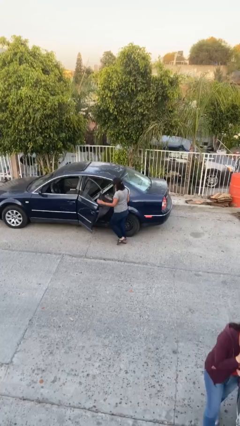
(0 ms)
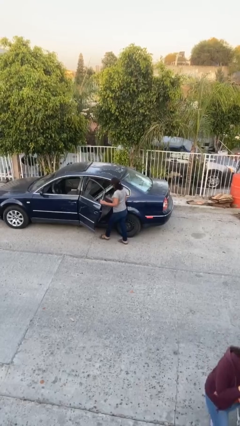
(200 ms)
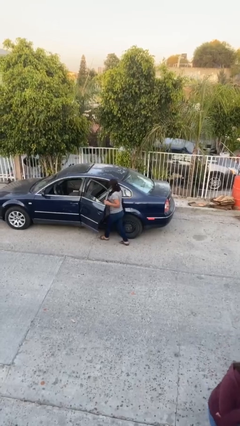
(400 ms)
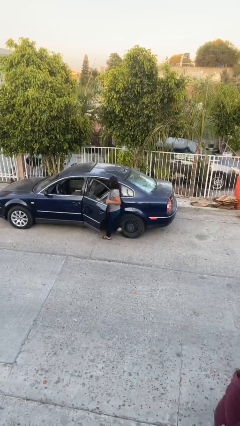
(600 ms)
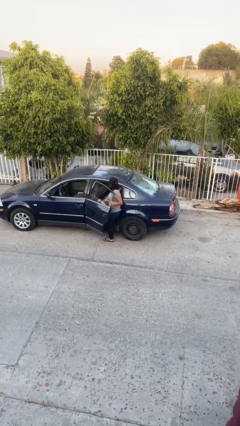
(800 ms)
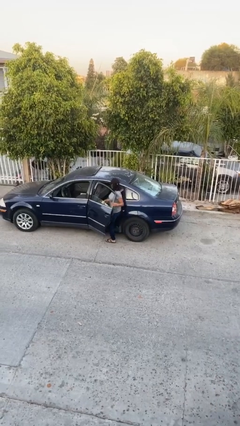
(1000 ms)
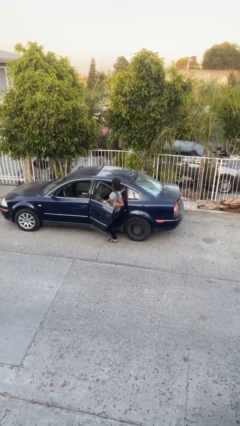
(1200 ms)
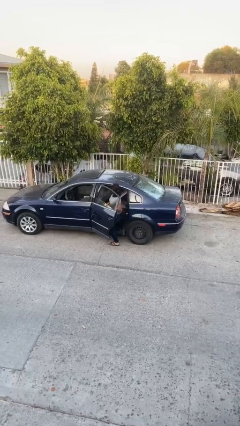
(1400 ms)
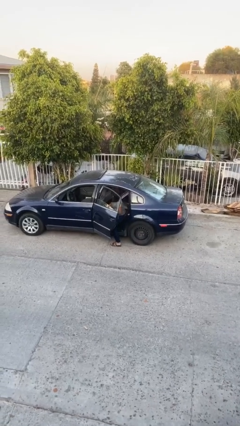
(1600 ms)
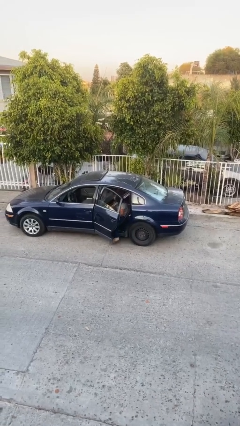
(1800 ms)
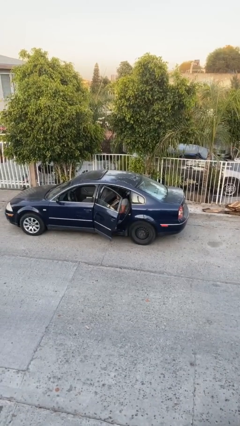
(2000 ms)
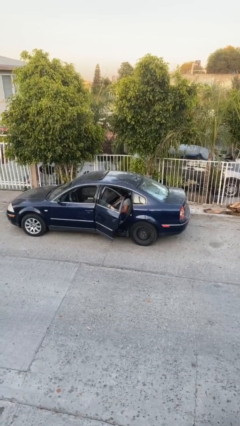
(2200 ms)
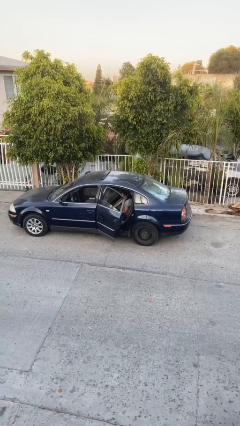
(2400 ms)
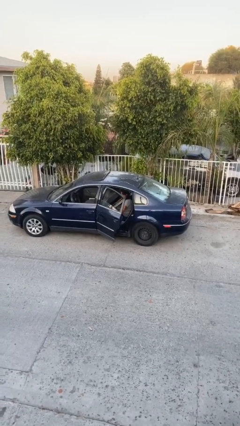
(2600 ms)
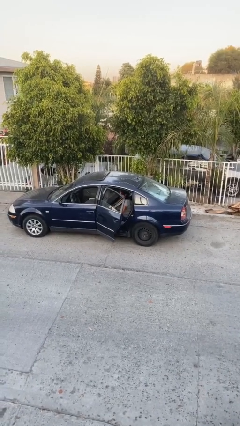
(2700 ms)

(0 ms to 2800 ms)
person enters car

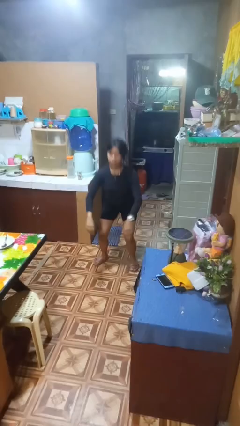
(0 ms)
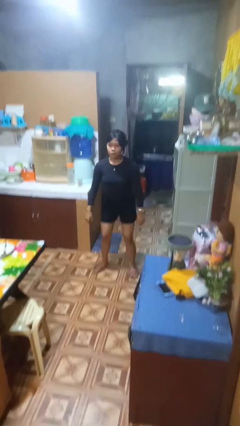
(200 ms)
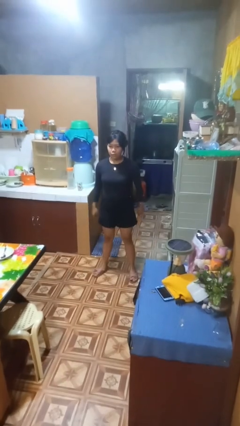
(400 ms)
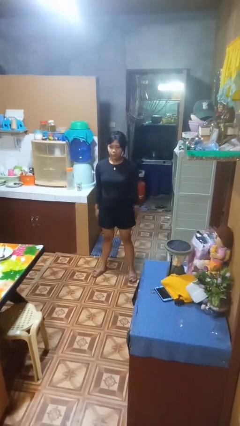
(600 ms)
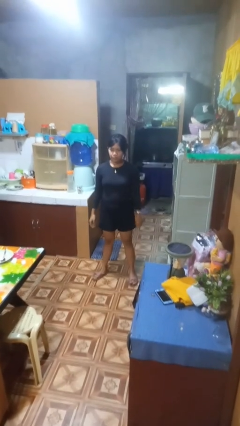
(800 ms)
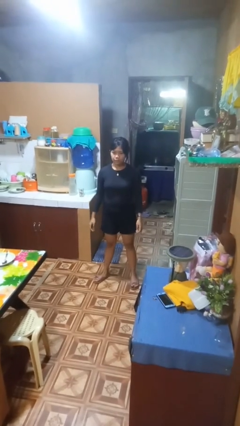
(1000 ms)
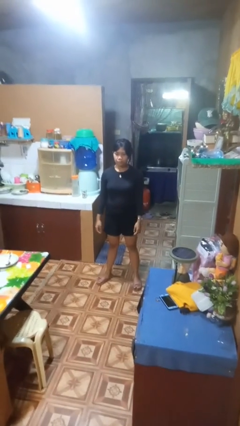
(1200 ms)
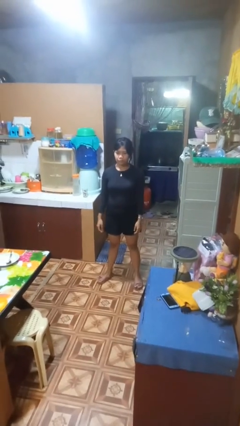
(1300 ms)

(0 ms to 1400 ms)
person stands up

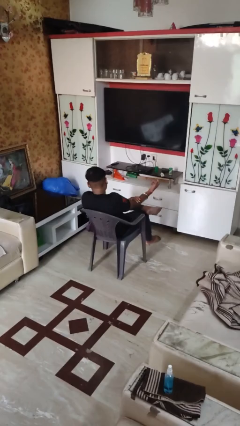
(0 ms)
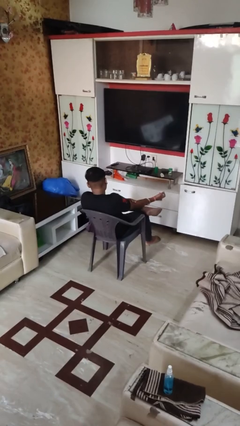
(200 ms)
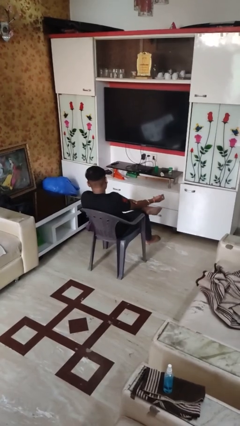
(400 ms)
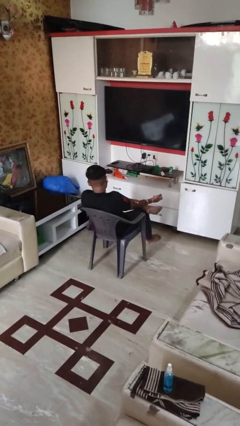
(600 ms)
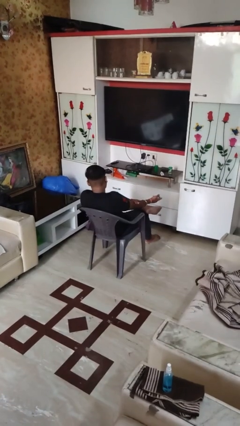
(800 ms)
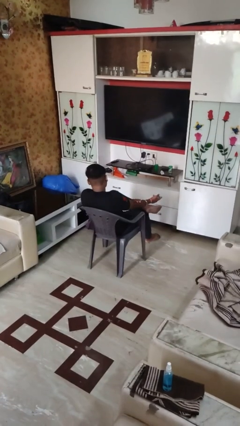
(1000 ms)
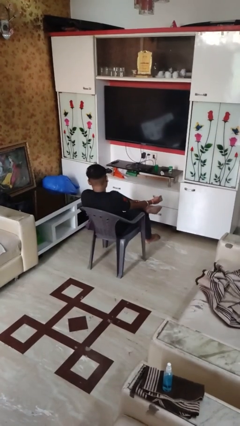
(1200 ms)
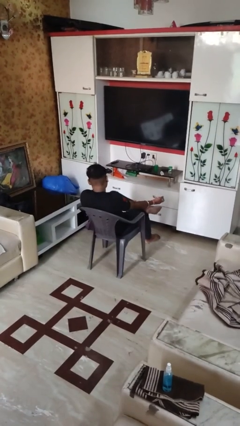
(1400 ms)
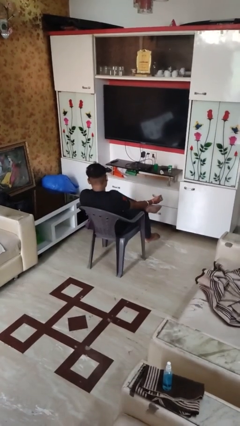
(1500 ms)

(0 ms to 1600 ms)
person swats bug

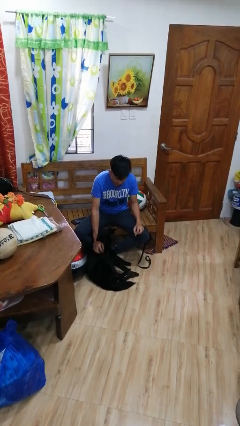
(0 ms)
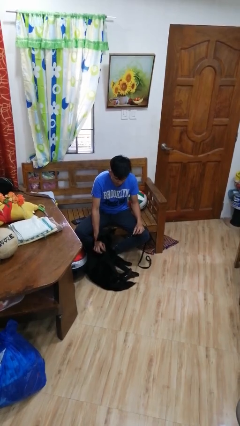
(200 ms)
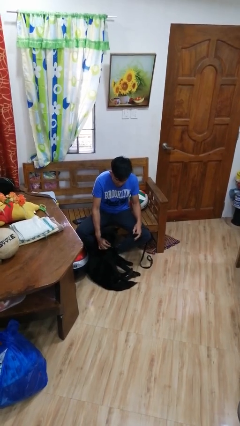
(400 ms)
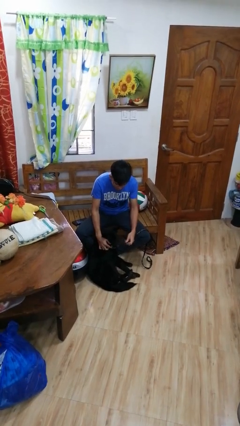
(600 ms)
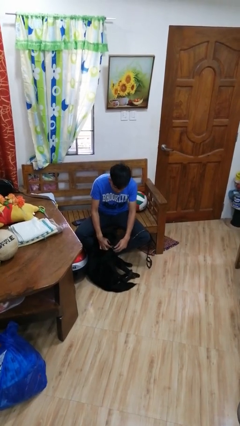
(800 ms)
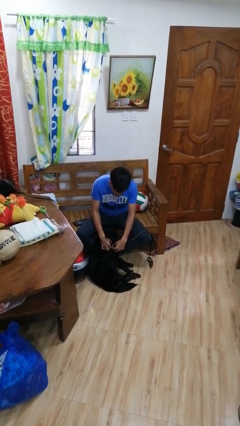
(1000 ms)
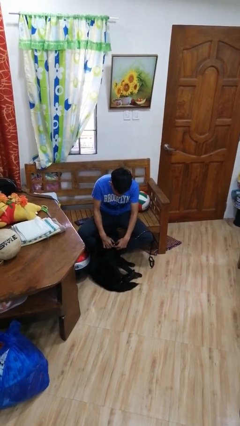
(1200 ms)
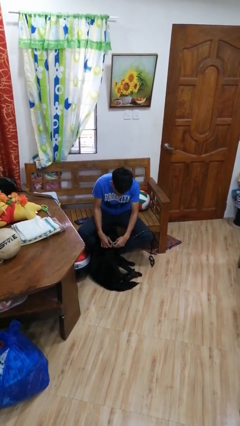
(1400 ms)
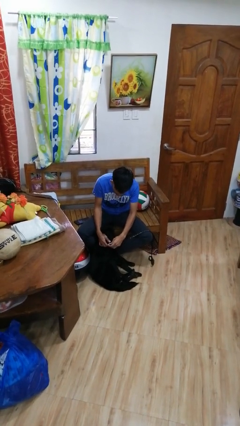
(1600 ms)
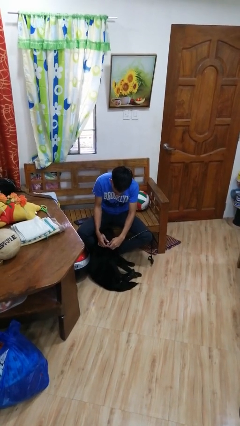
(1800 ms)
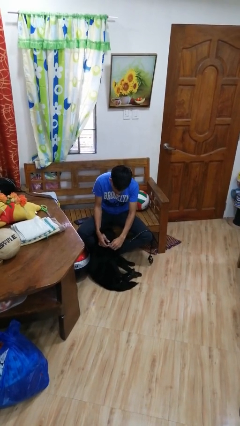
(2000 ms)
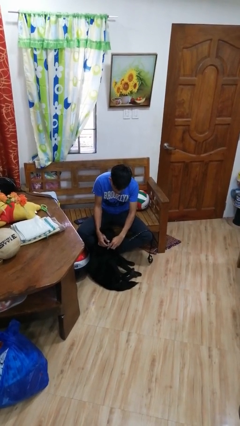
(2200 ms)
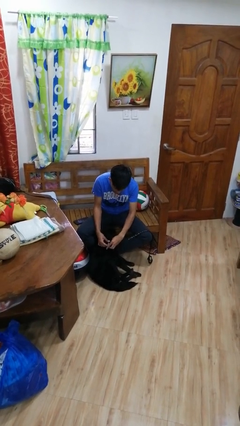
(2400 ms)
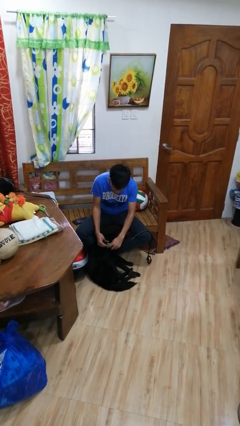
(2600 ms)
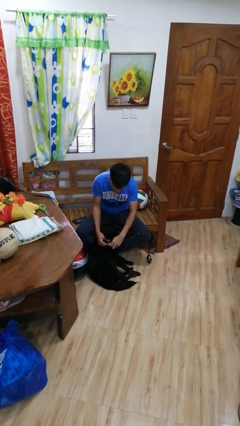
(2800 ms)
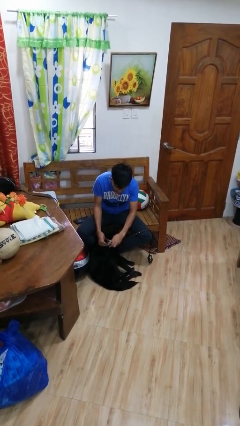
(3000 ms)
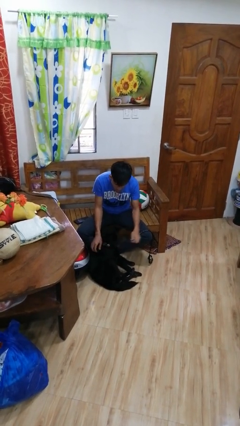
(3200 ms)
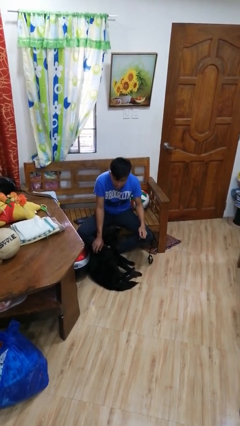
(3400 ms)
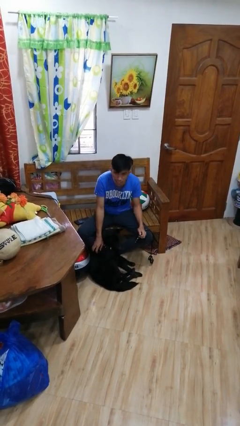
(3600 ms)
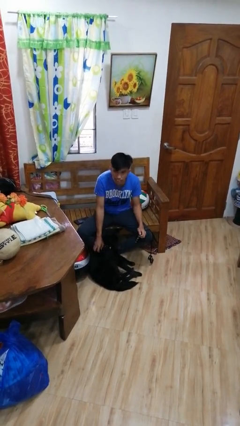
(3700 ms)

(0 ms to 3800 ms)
person unattaches leash from dog

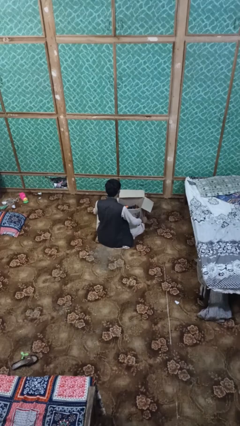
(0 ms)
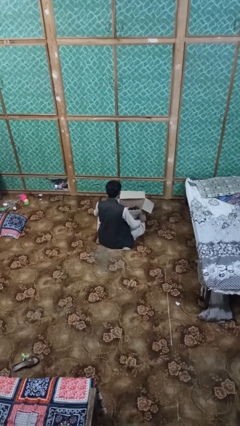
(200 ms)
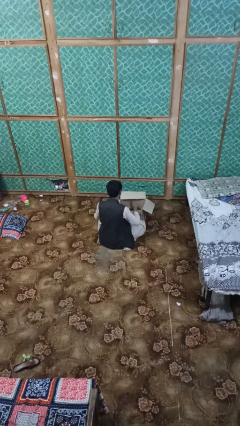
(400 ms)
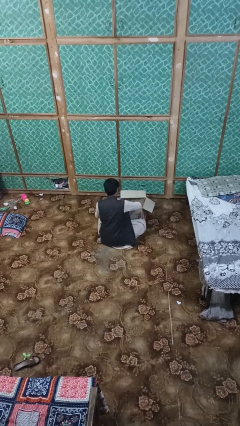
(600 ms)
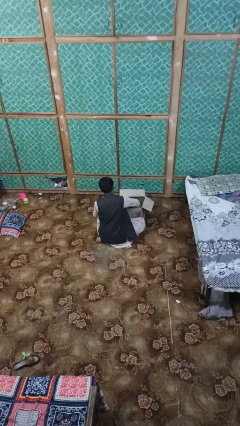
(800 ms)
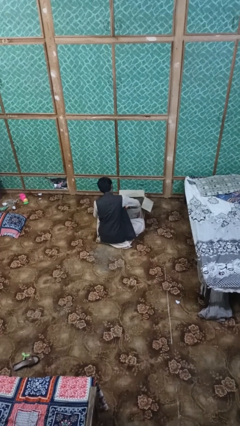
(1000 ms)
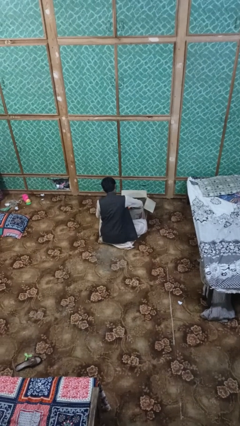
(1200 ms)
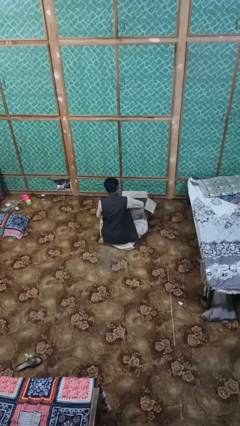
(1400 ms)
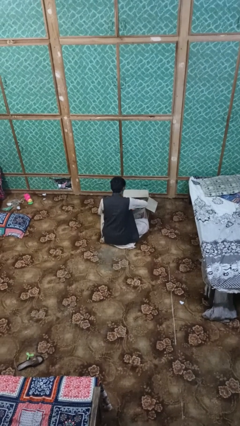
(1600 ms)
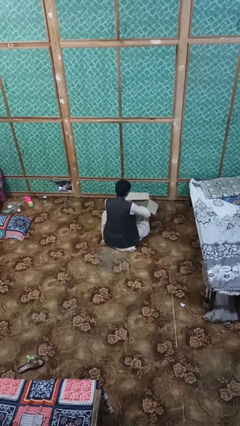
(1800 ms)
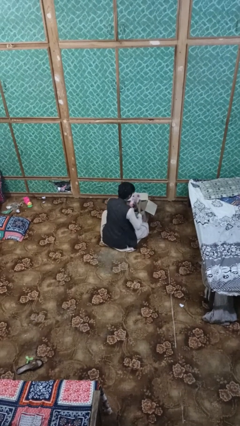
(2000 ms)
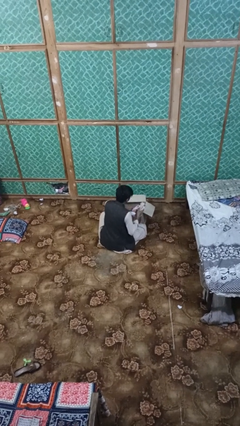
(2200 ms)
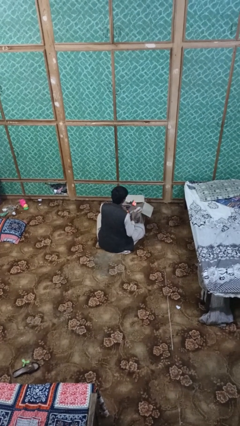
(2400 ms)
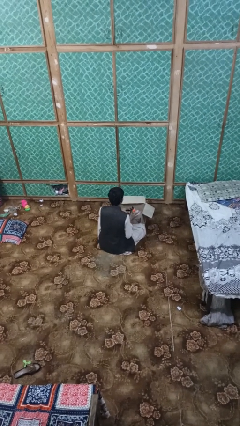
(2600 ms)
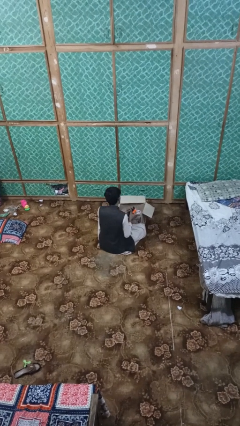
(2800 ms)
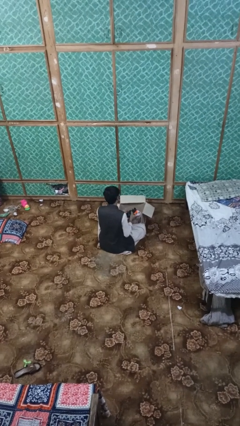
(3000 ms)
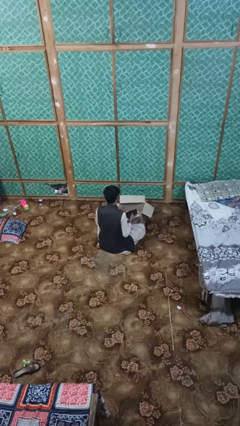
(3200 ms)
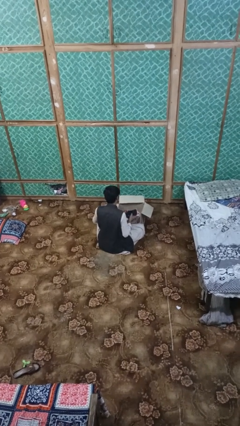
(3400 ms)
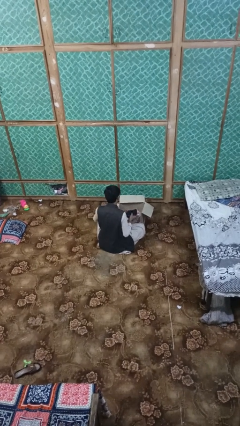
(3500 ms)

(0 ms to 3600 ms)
person takes object from box

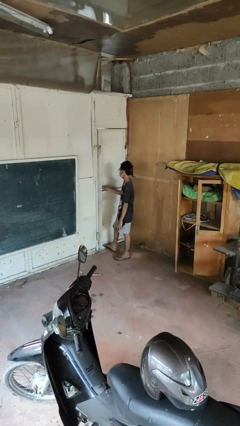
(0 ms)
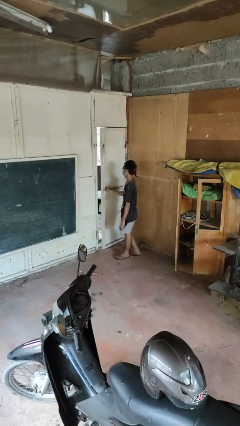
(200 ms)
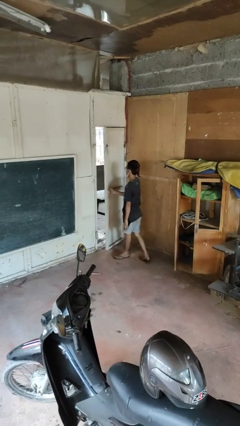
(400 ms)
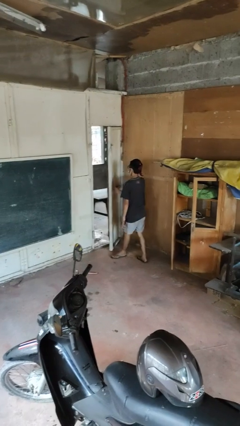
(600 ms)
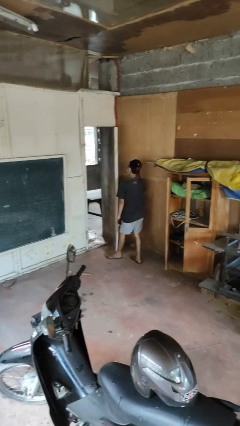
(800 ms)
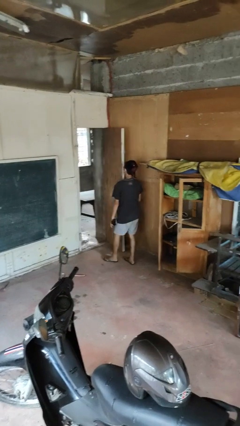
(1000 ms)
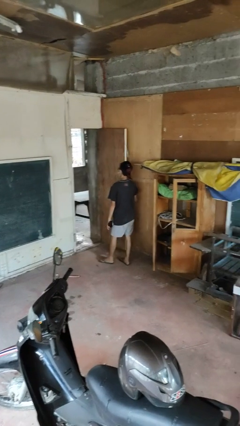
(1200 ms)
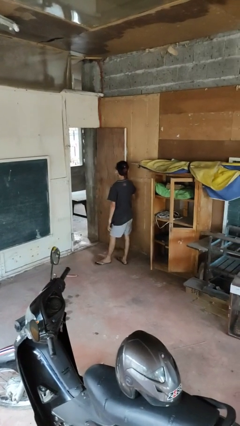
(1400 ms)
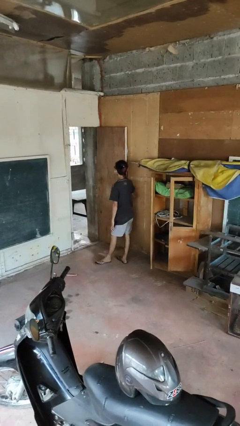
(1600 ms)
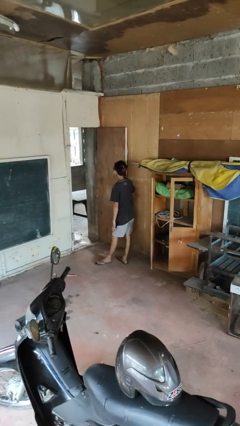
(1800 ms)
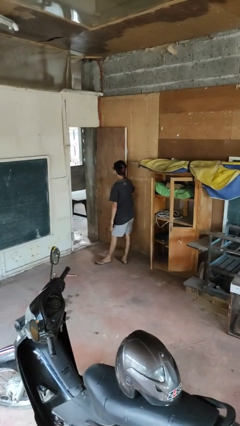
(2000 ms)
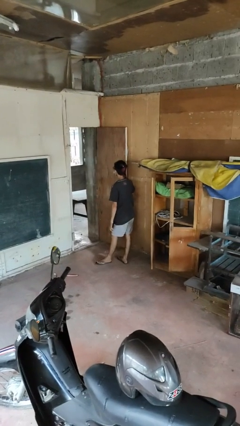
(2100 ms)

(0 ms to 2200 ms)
person opens facility door

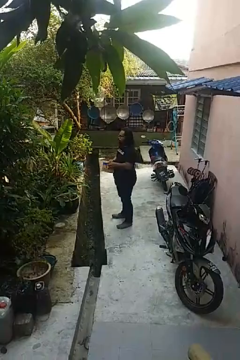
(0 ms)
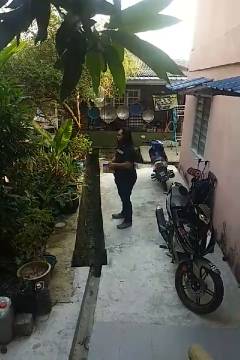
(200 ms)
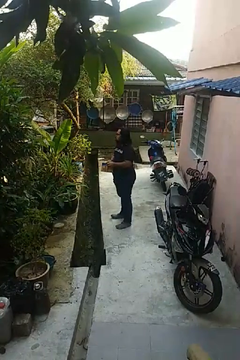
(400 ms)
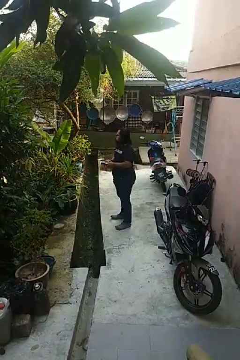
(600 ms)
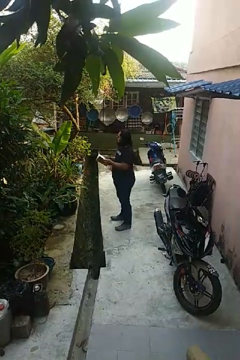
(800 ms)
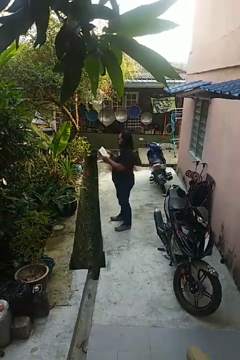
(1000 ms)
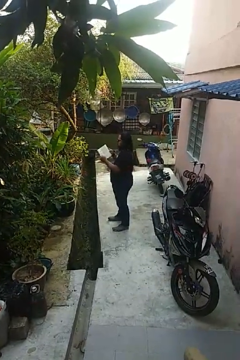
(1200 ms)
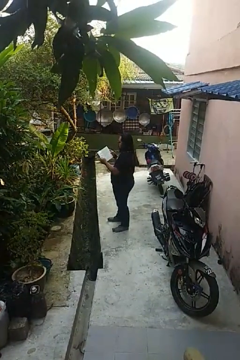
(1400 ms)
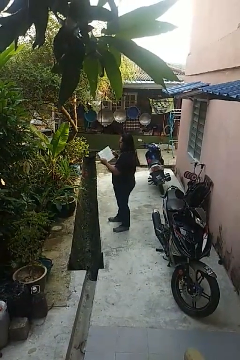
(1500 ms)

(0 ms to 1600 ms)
person reads book

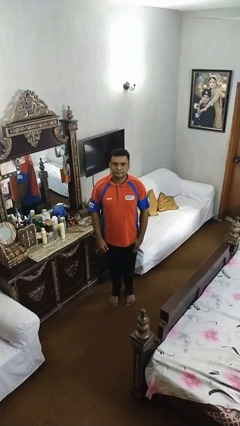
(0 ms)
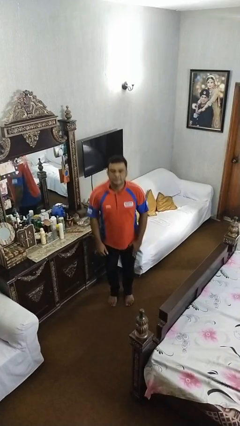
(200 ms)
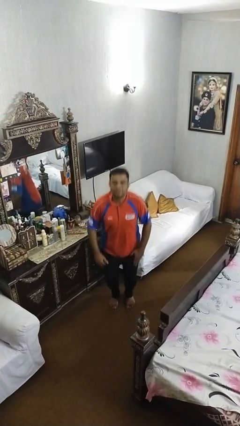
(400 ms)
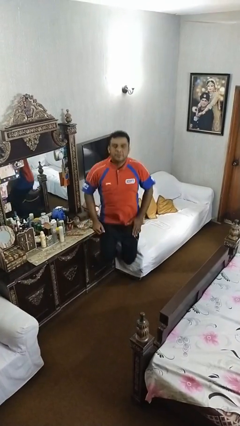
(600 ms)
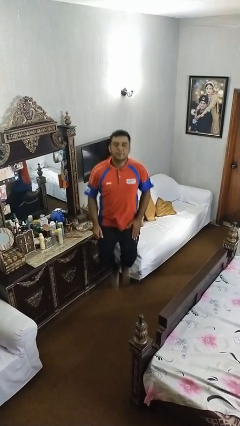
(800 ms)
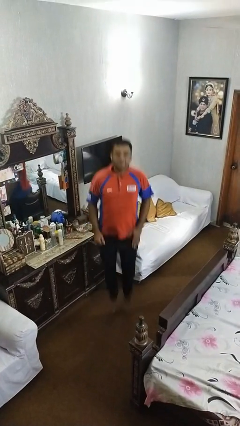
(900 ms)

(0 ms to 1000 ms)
person jumps
